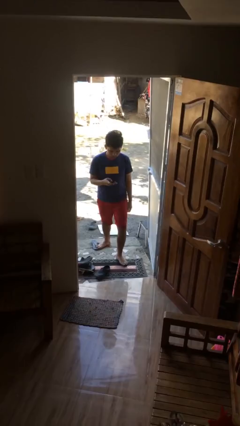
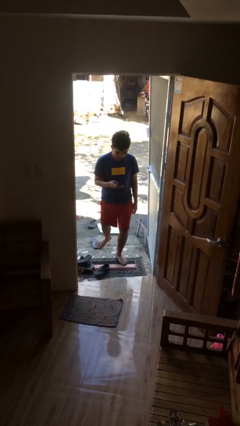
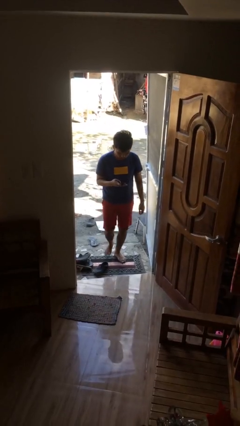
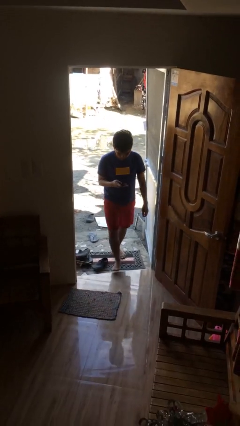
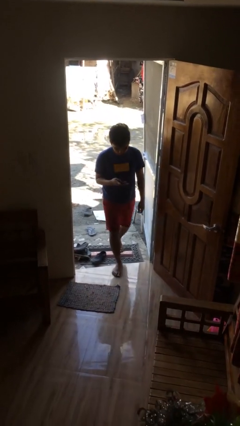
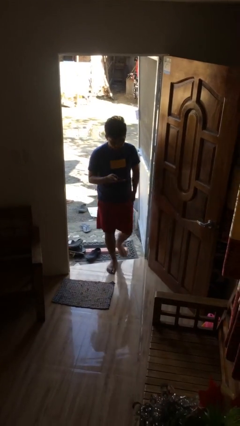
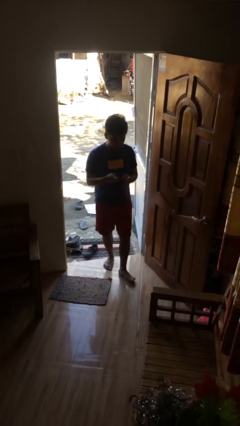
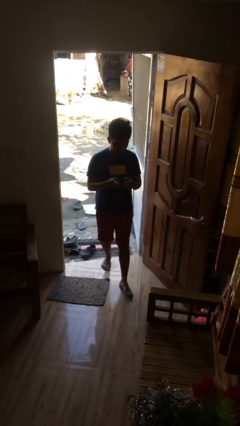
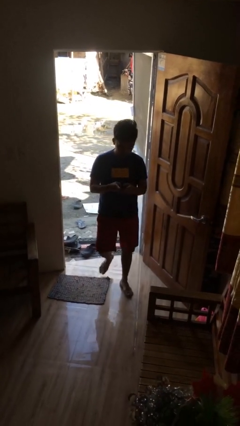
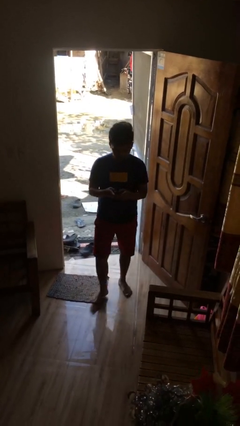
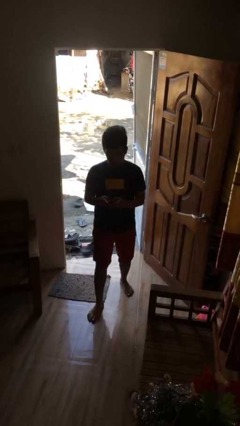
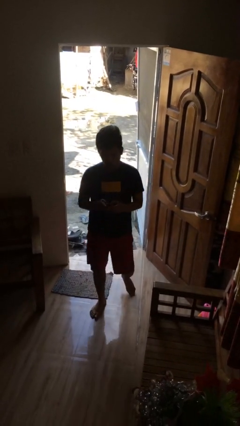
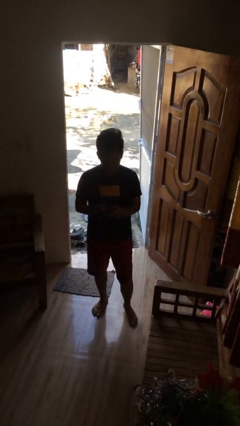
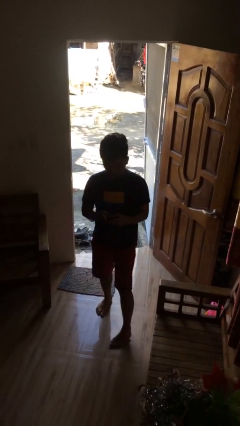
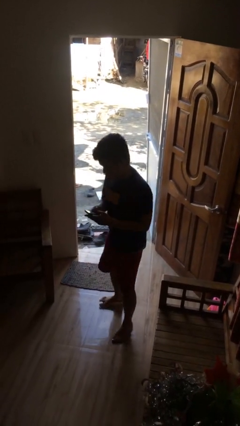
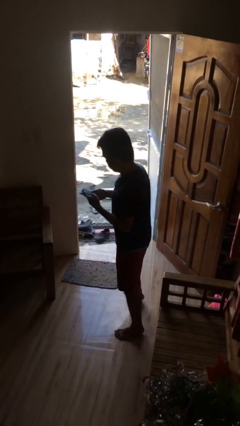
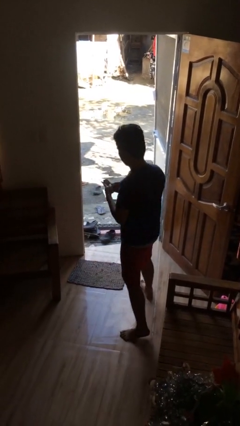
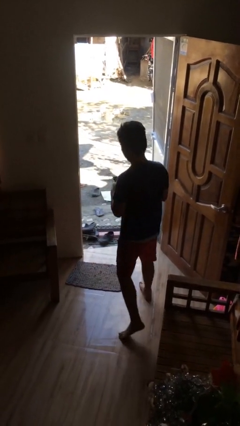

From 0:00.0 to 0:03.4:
person enters scene through structure

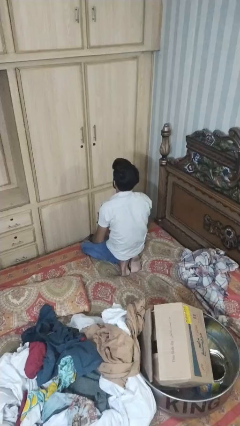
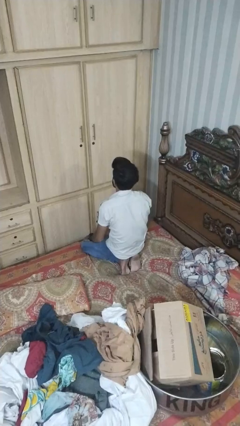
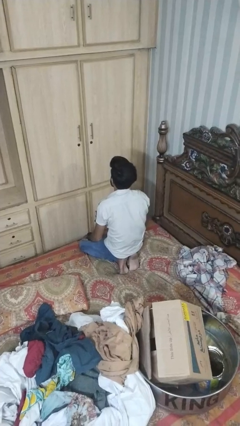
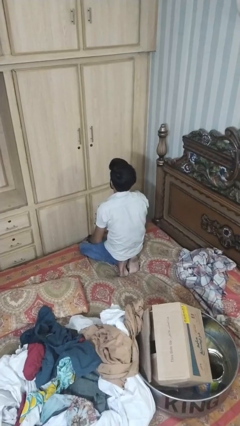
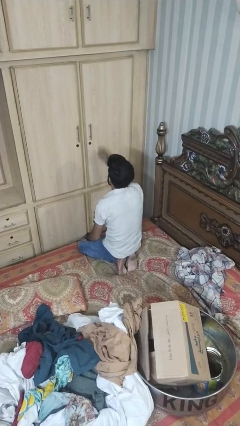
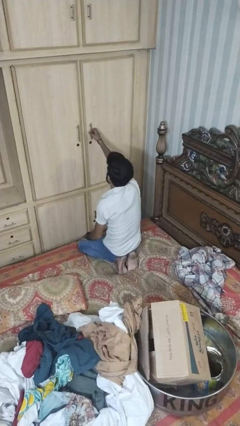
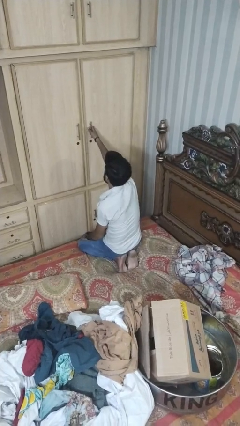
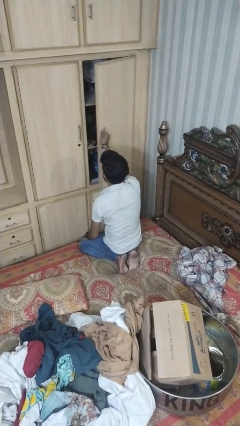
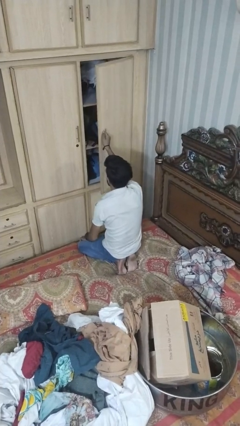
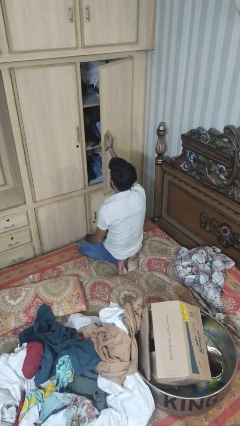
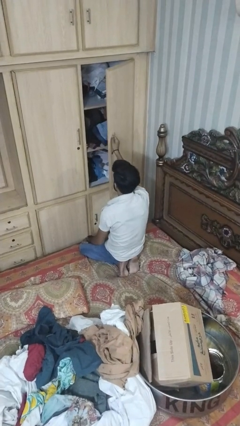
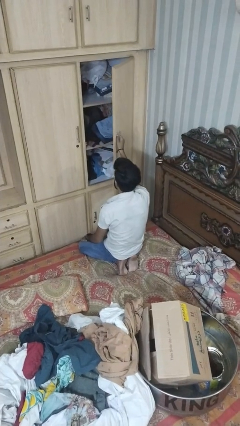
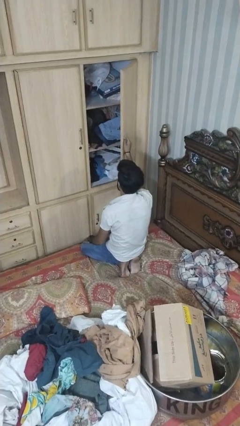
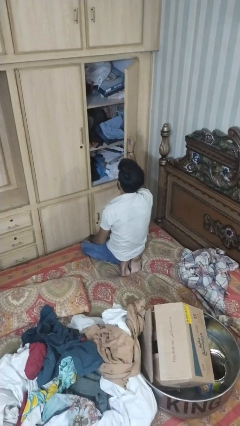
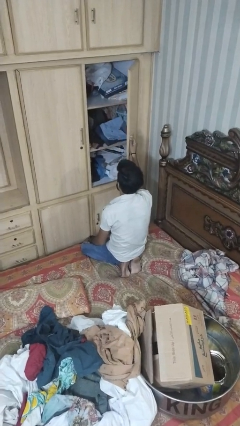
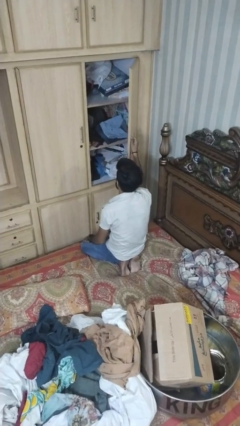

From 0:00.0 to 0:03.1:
person opens dresser drawer

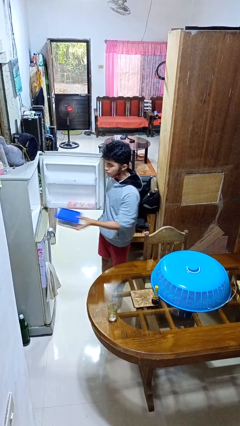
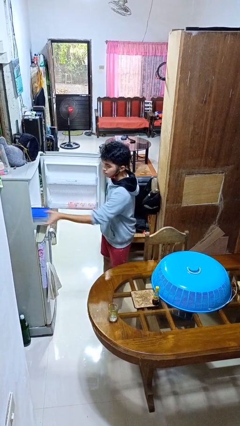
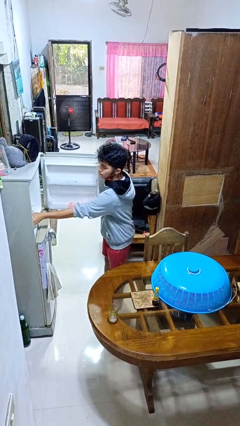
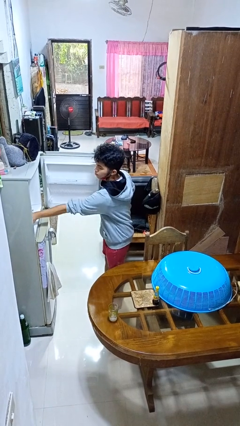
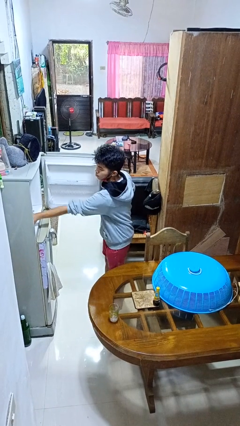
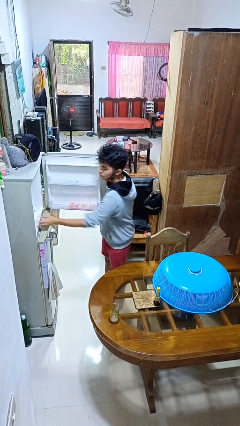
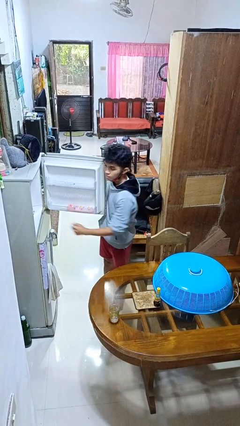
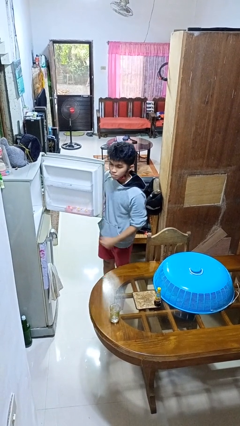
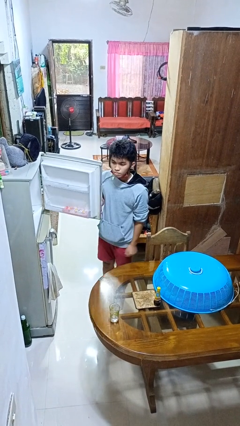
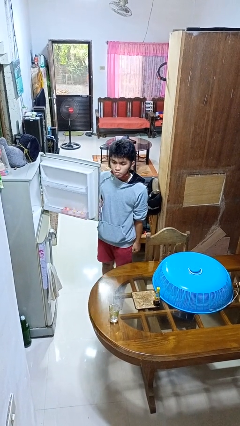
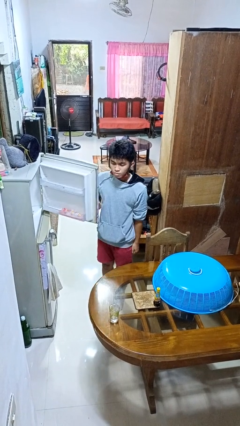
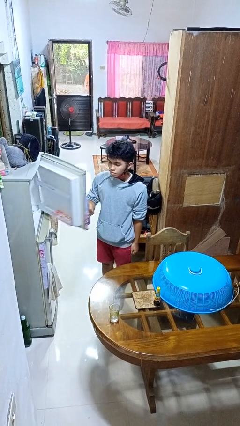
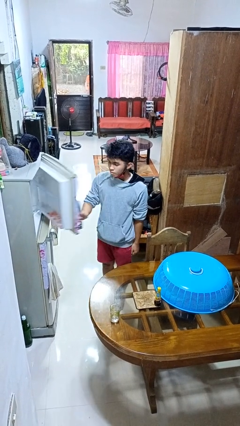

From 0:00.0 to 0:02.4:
person puts object into refrigerator

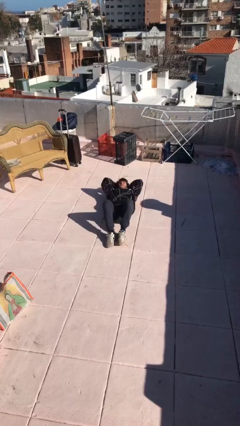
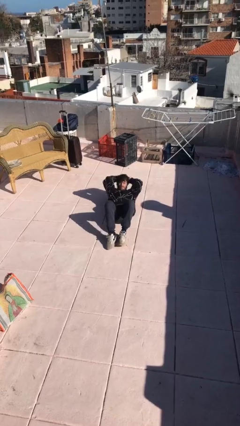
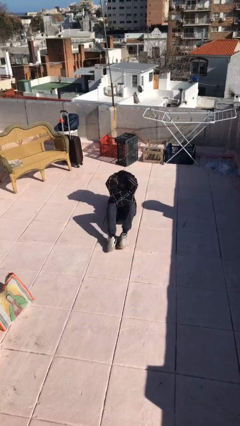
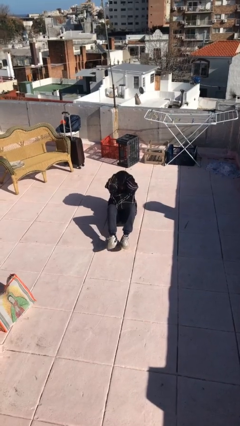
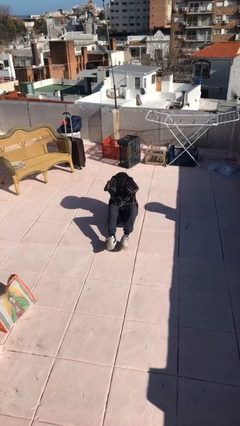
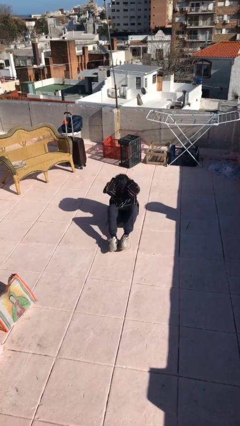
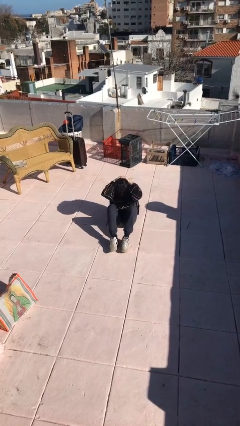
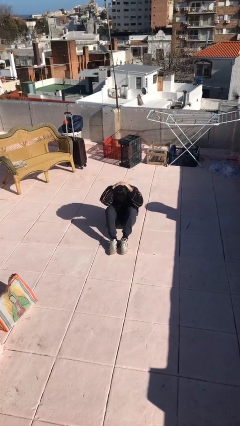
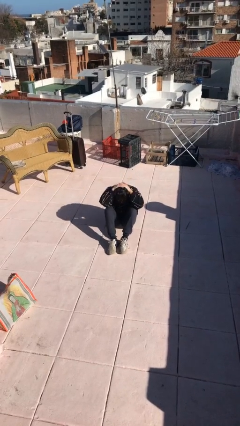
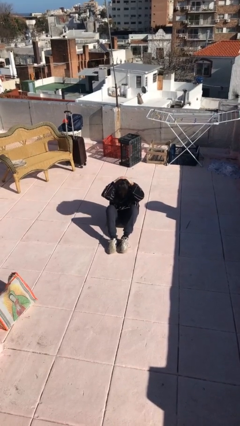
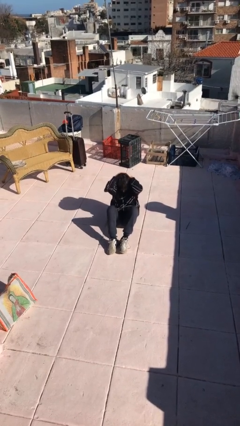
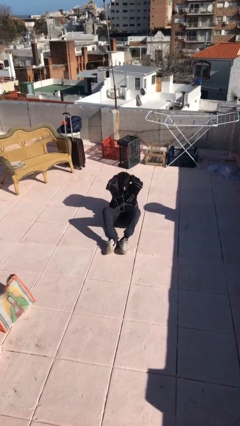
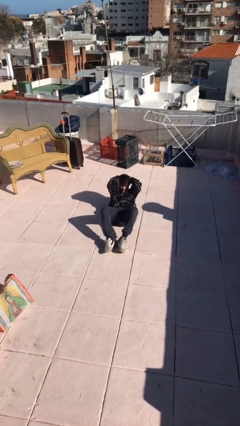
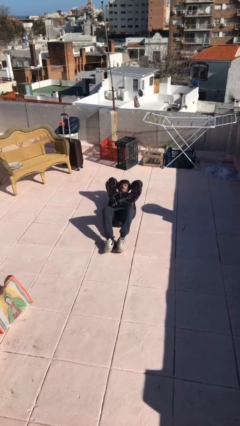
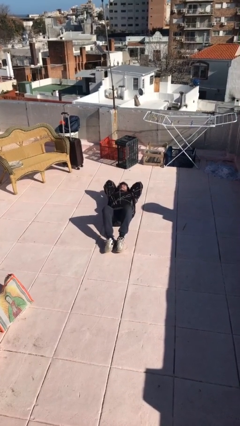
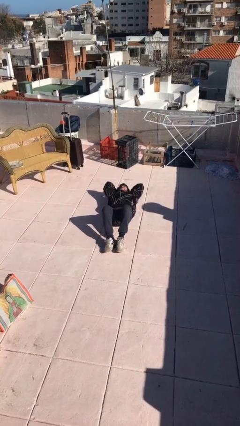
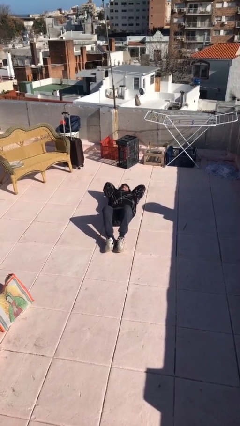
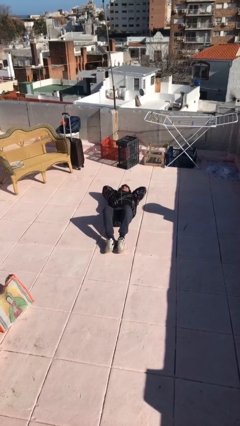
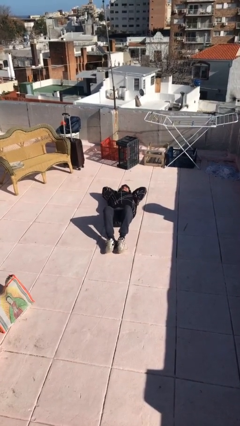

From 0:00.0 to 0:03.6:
person exercises with situp

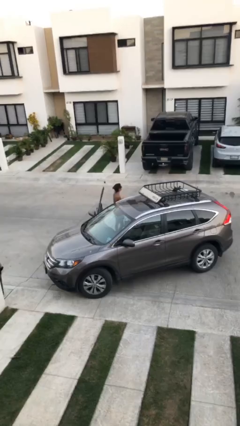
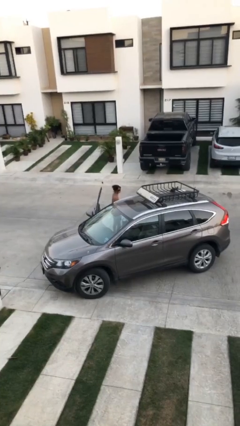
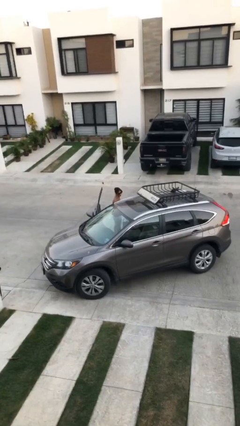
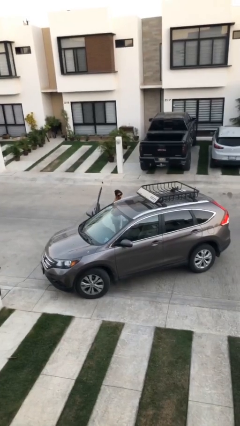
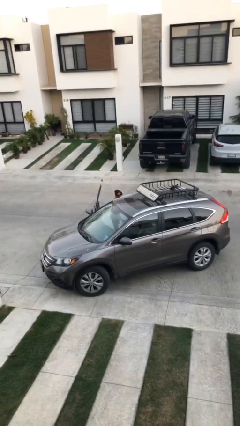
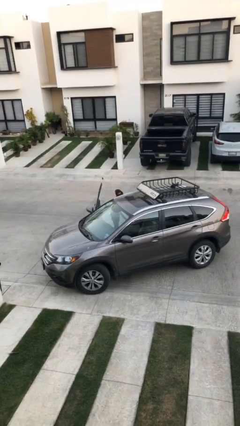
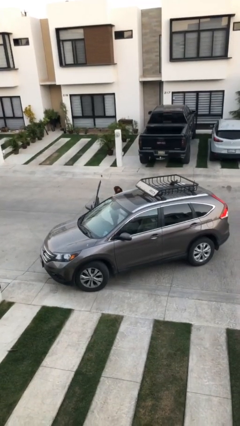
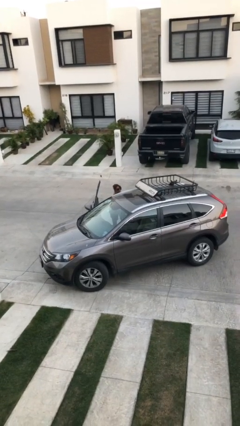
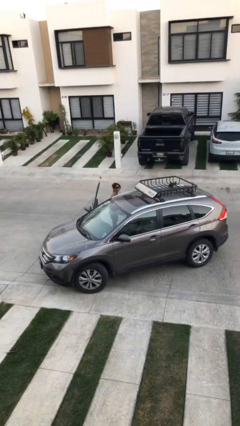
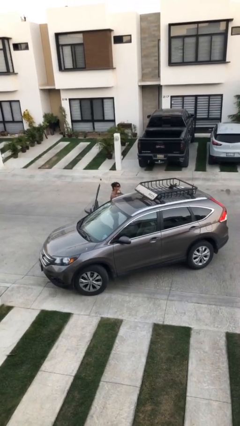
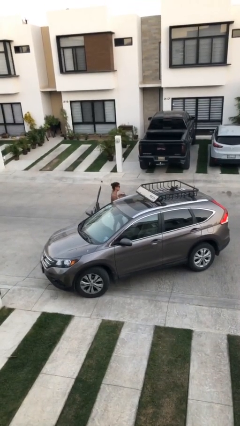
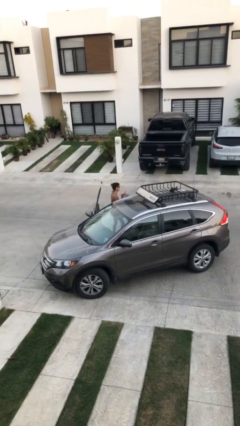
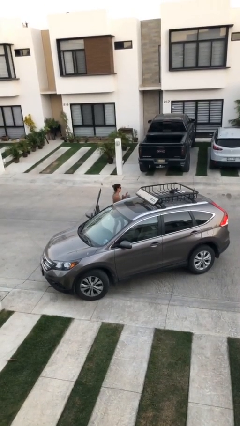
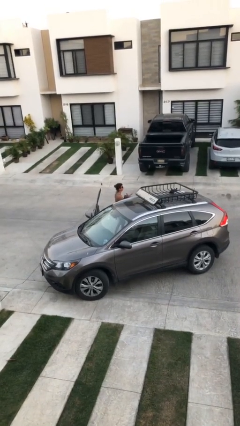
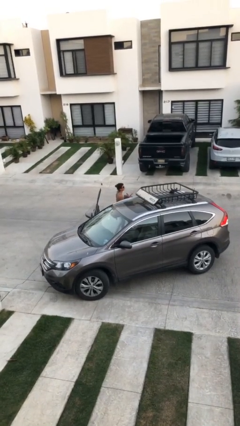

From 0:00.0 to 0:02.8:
person unloads car

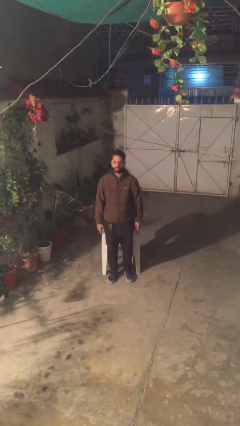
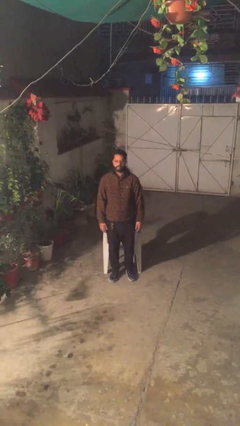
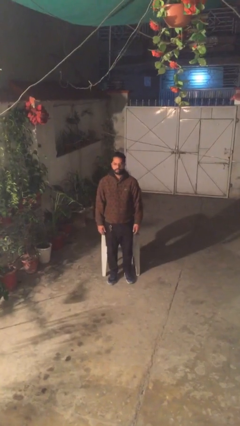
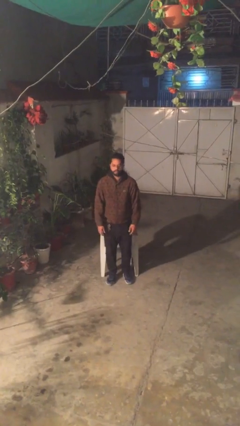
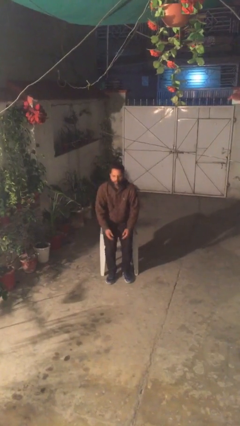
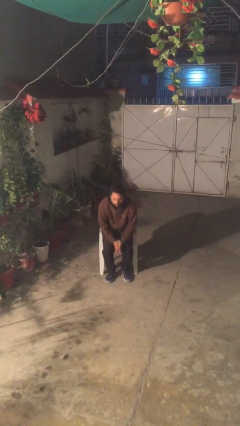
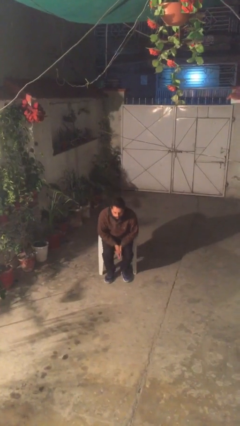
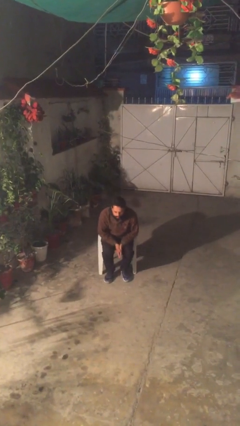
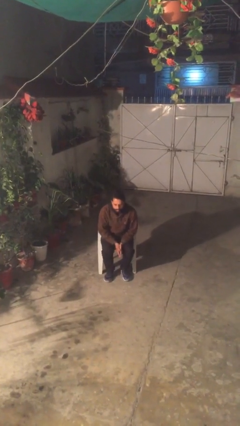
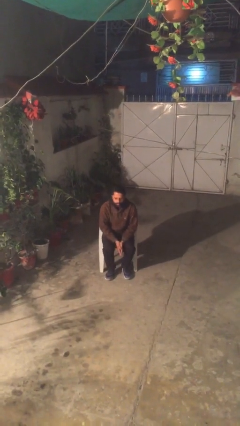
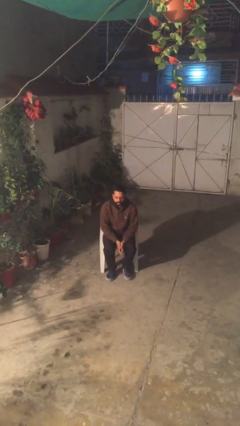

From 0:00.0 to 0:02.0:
person sits down
